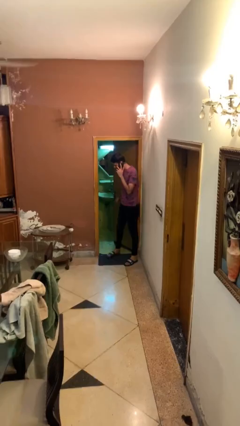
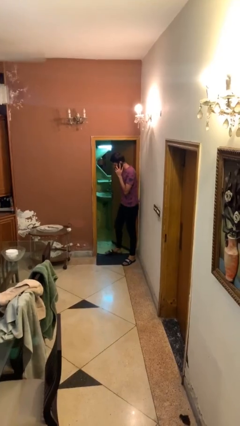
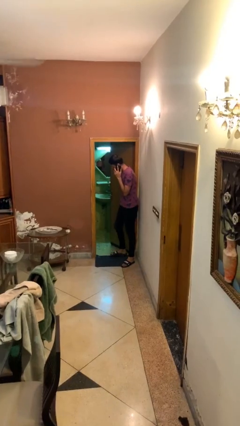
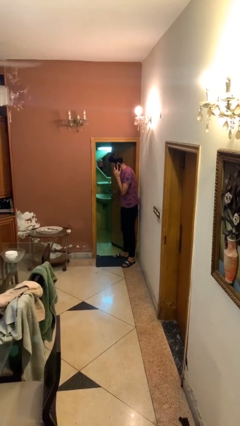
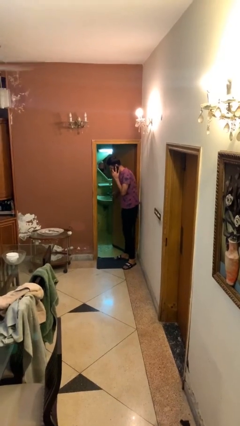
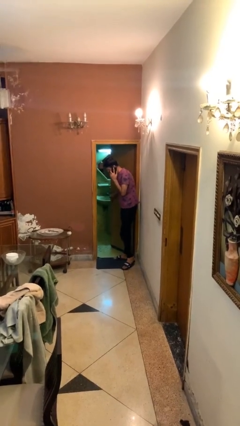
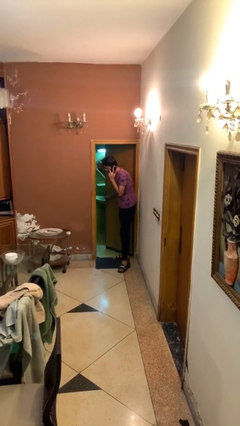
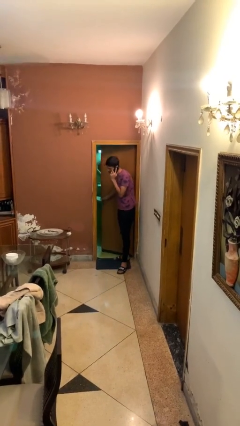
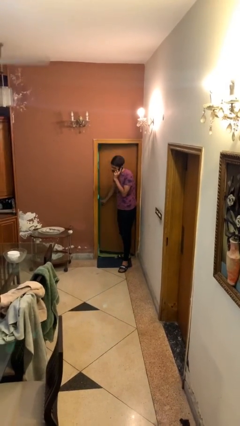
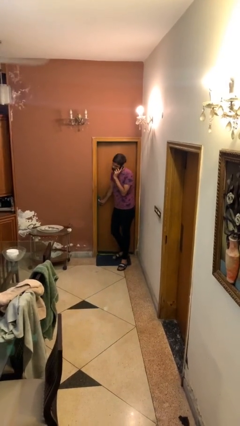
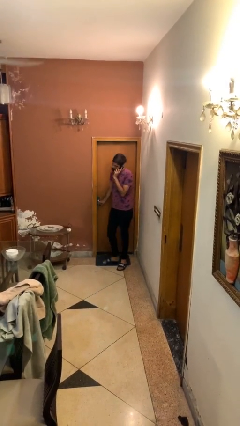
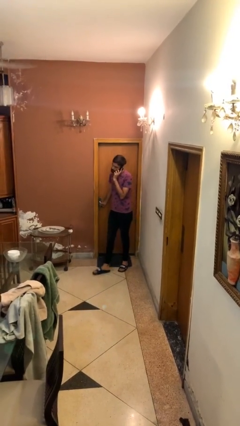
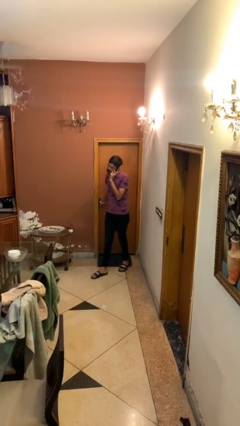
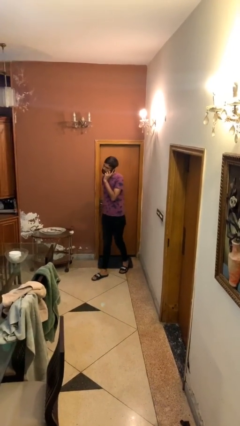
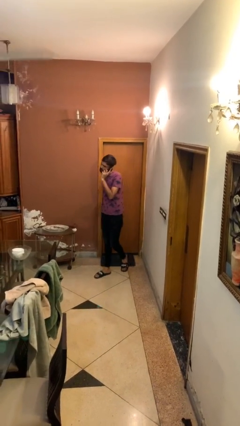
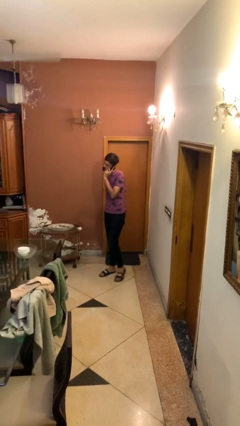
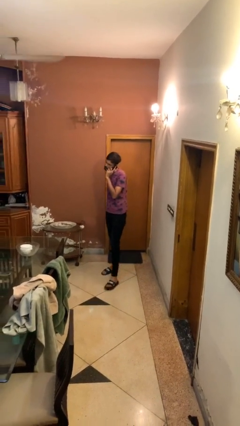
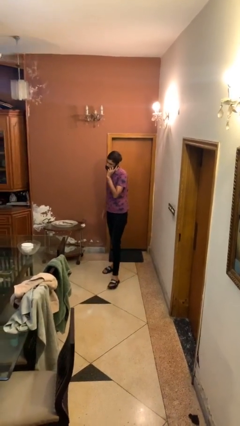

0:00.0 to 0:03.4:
person closes facility door

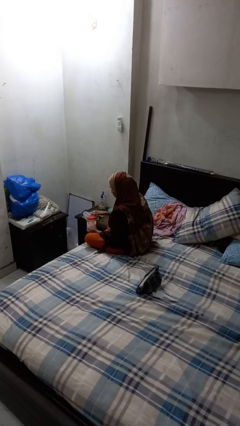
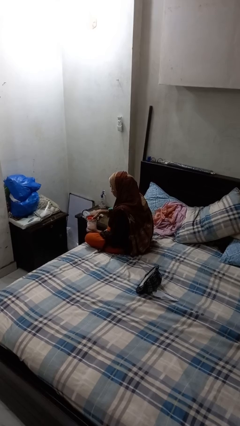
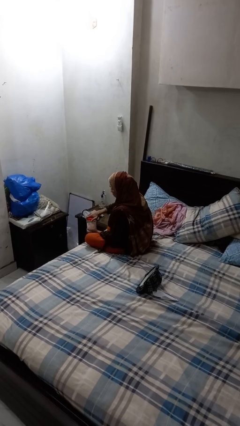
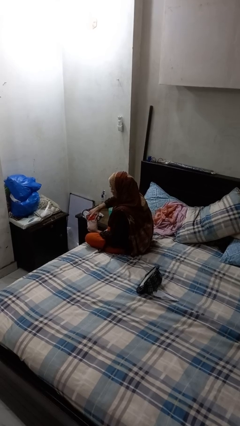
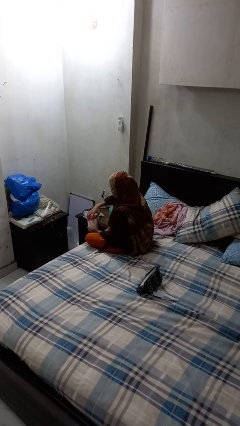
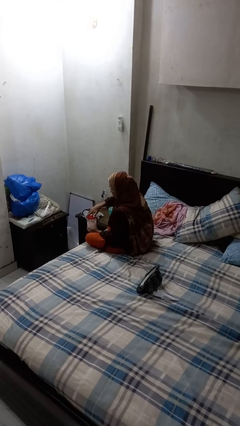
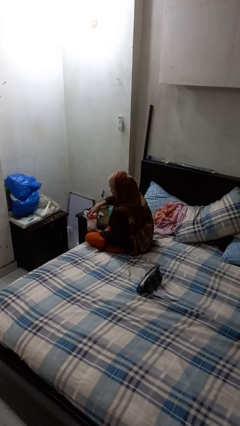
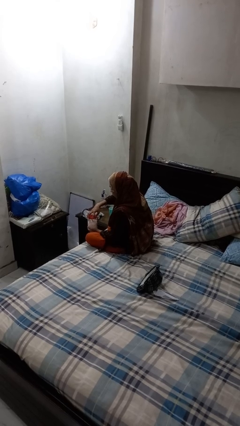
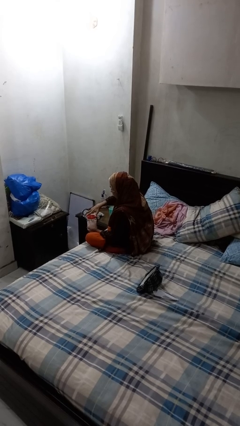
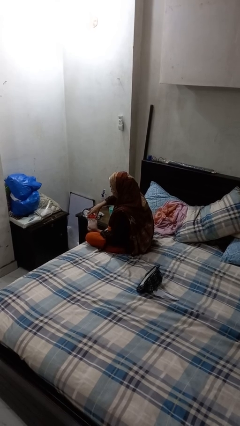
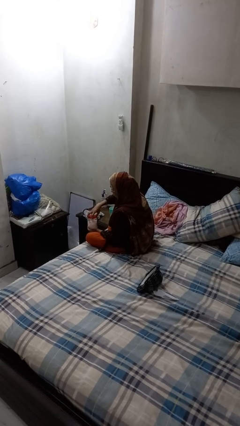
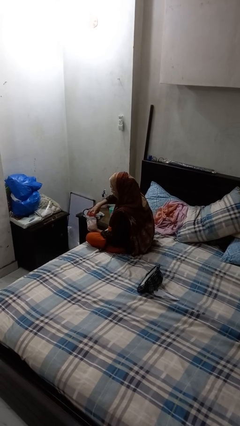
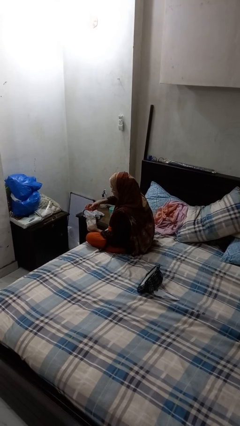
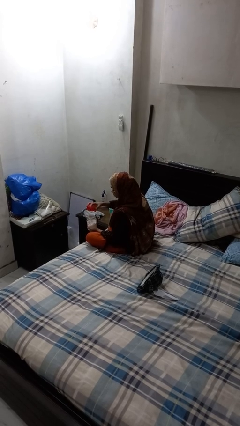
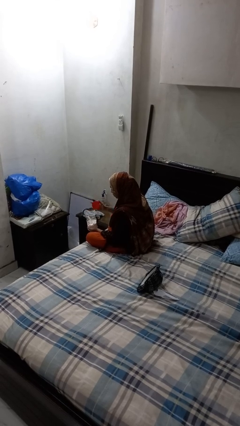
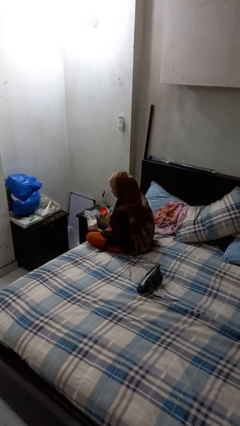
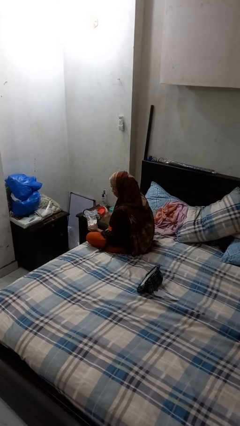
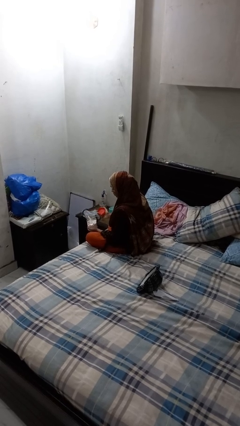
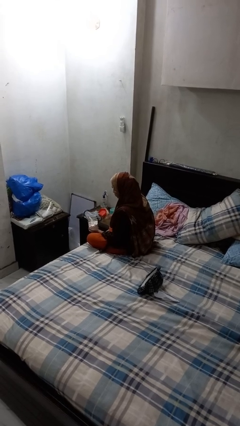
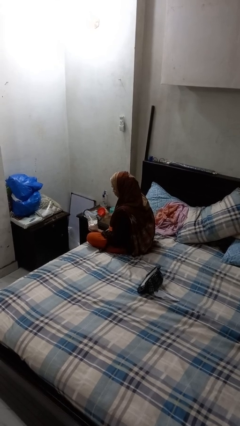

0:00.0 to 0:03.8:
person opens jar

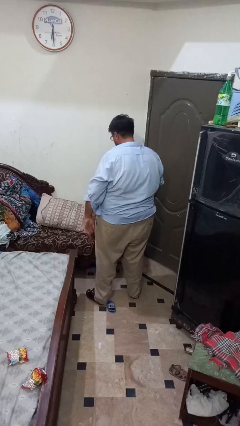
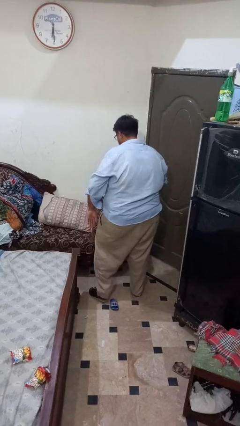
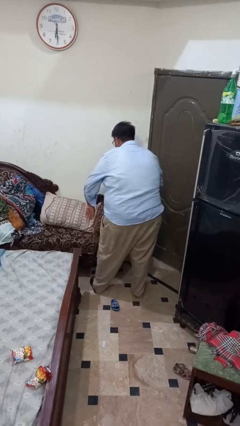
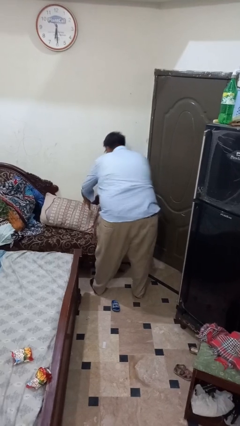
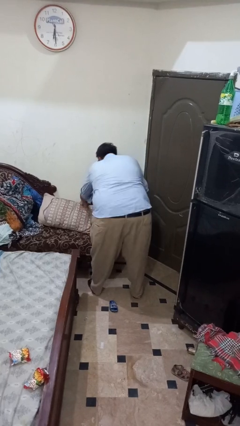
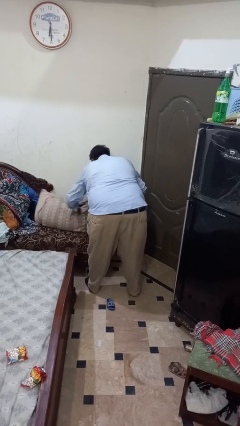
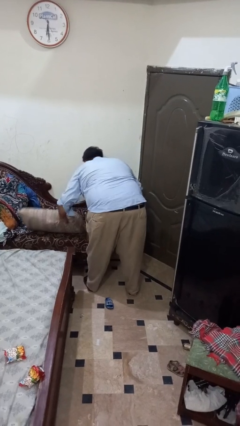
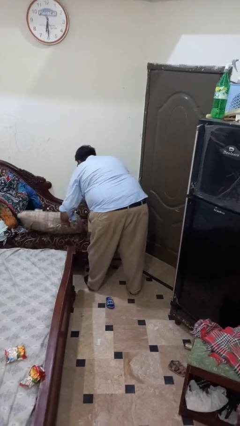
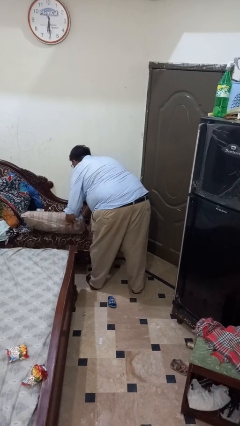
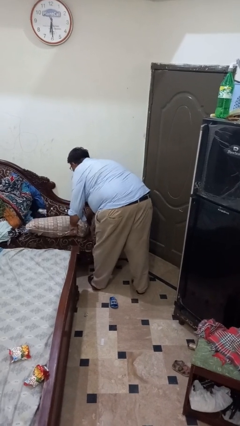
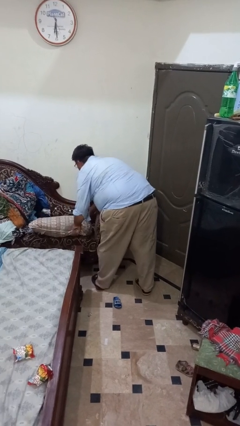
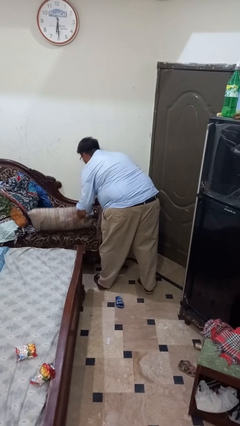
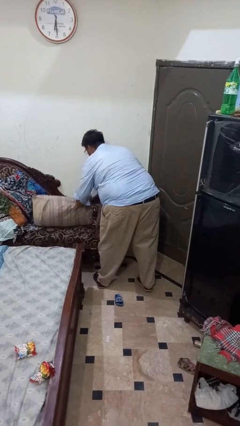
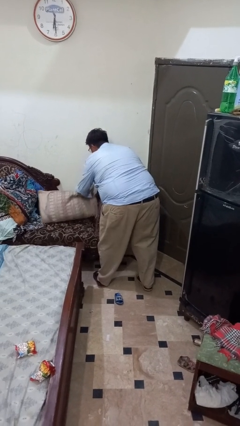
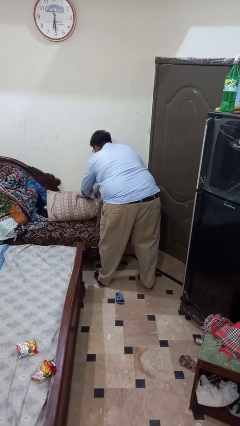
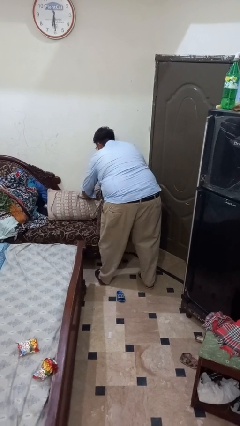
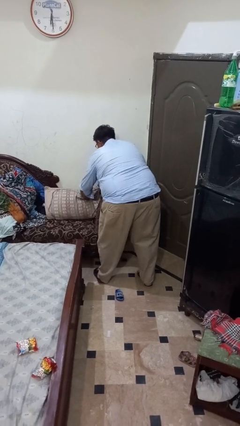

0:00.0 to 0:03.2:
person searches in couch

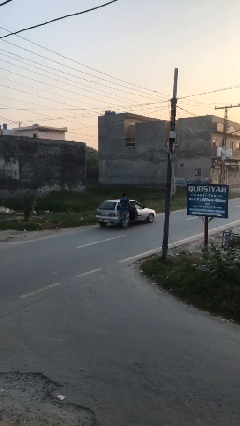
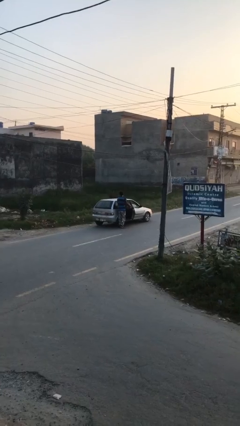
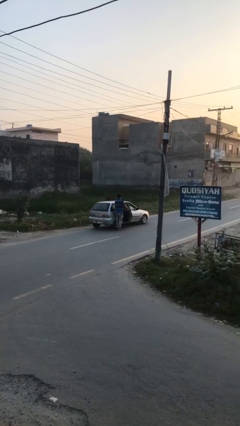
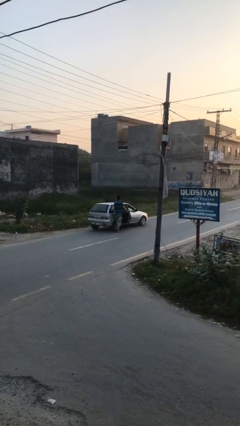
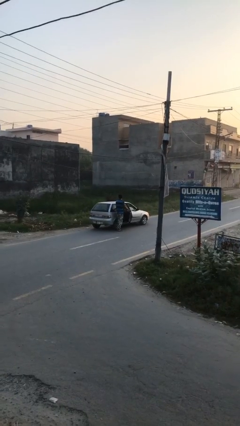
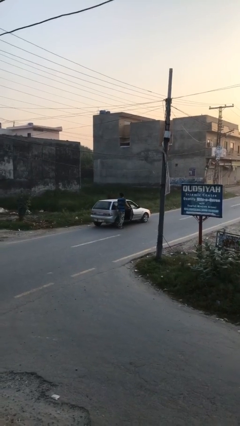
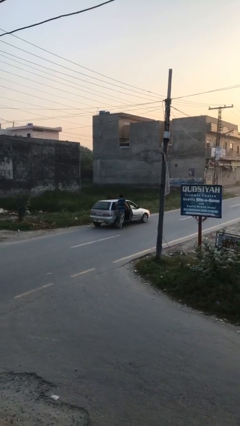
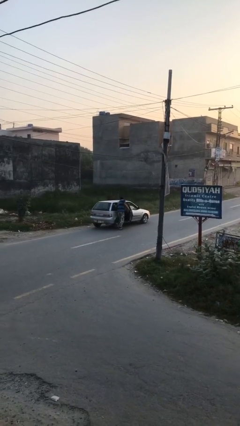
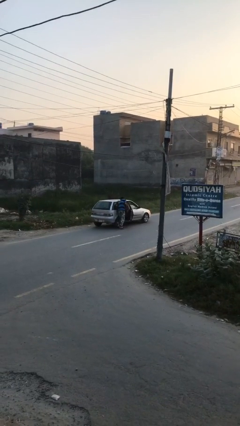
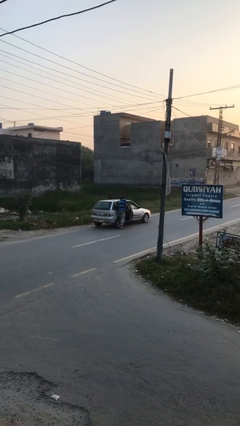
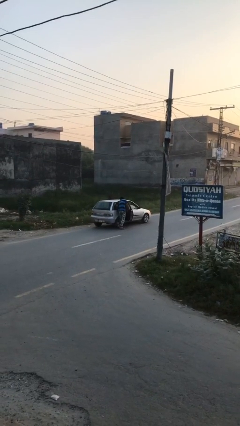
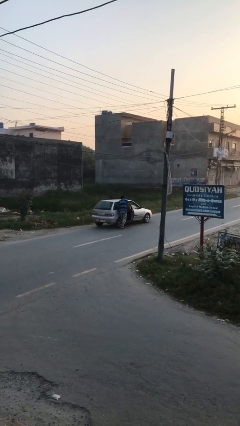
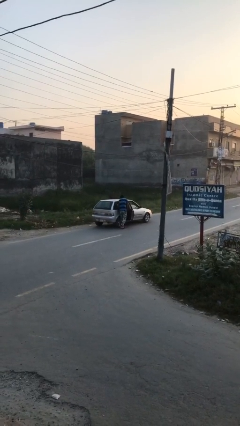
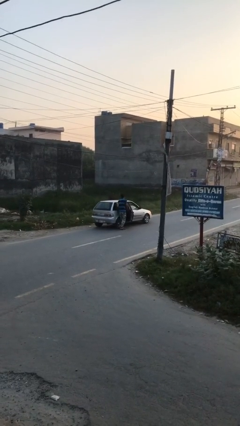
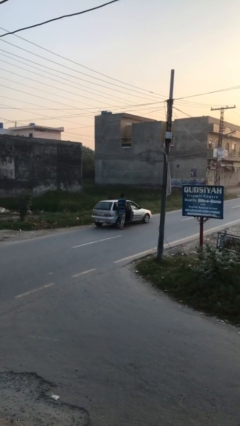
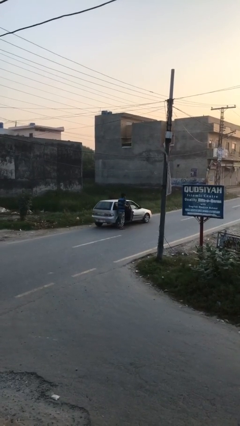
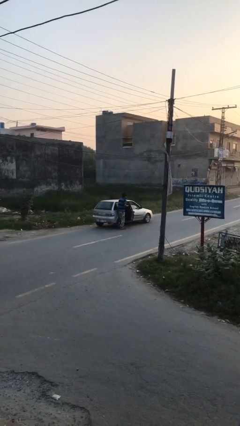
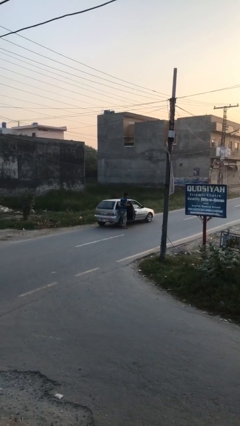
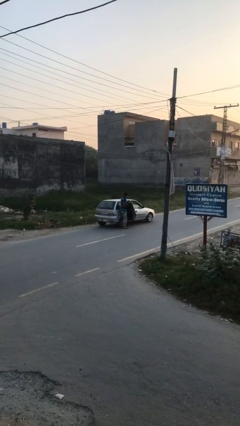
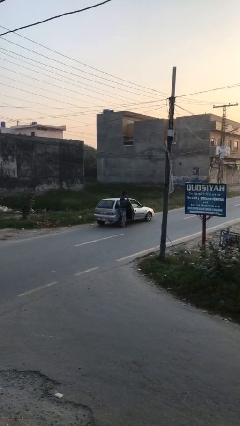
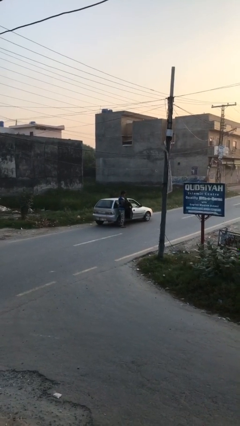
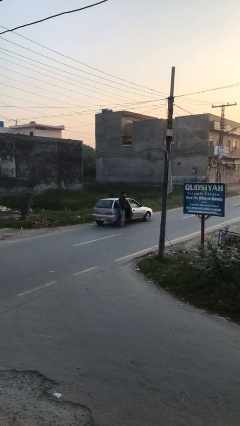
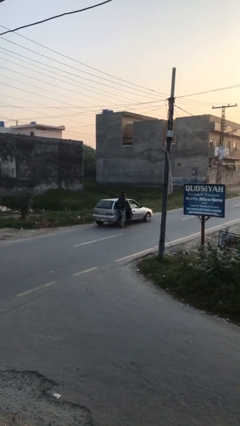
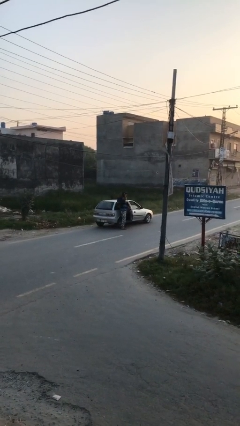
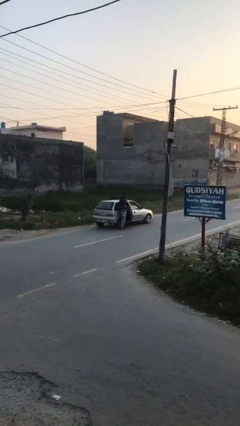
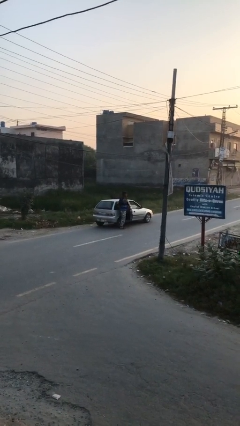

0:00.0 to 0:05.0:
person unloads car

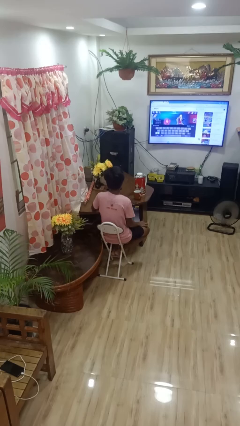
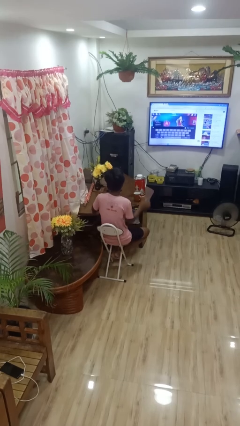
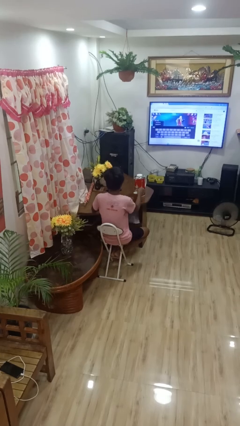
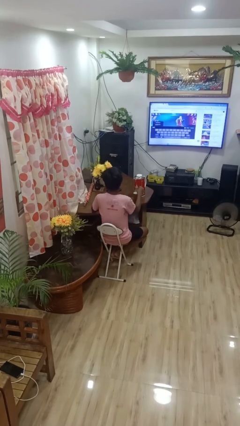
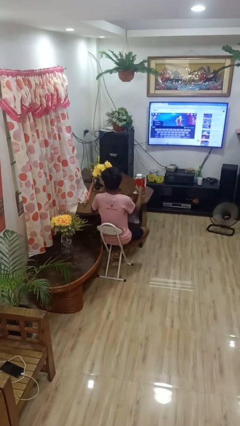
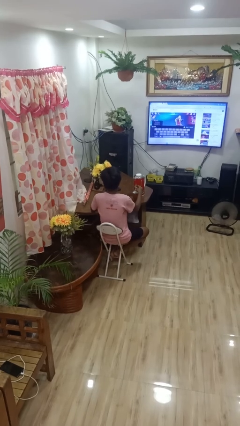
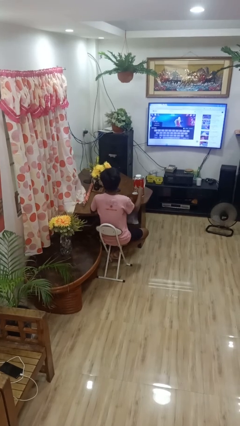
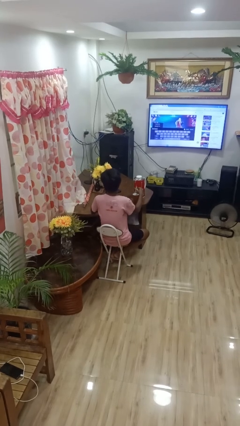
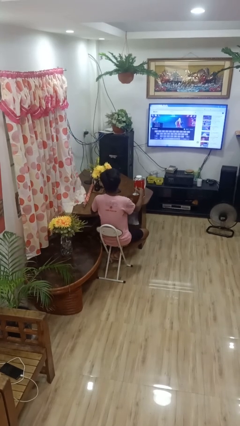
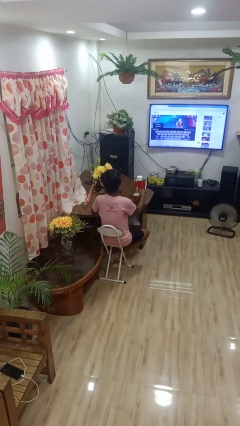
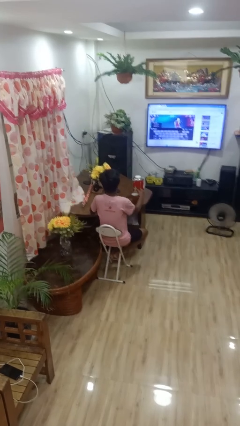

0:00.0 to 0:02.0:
person stirs mug
